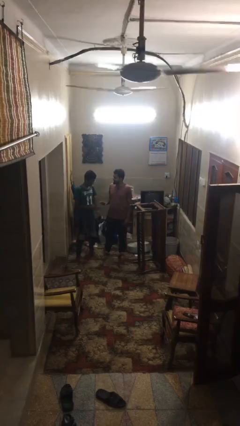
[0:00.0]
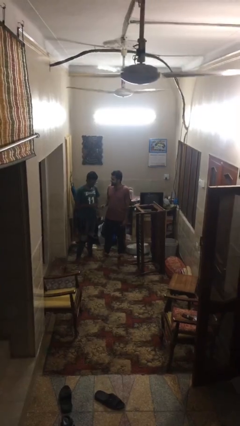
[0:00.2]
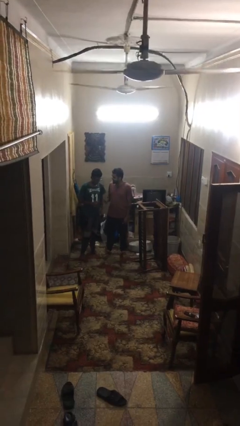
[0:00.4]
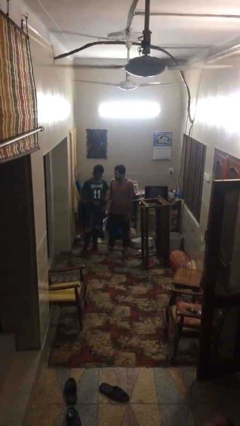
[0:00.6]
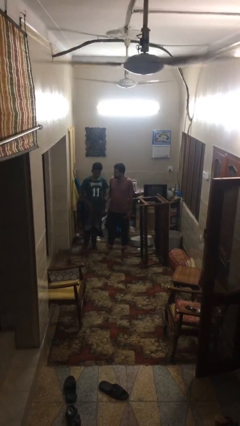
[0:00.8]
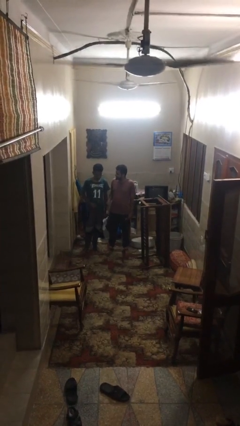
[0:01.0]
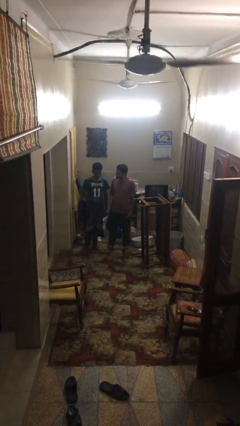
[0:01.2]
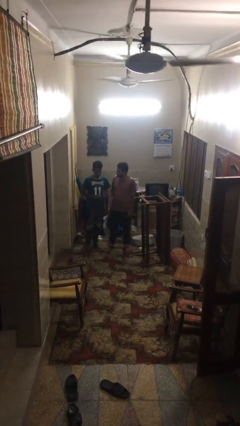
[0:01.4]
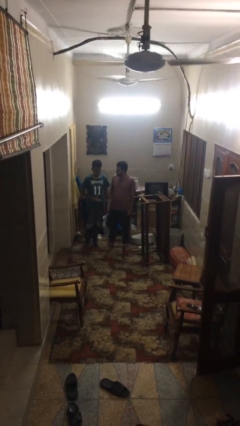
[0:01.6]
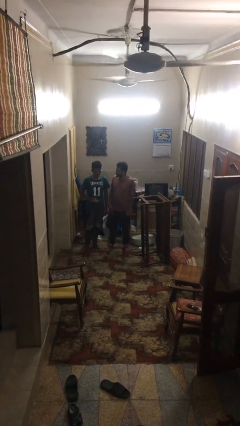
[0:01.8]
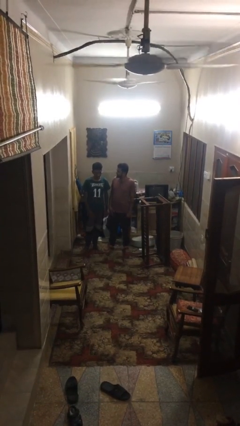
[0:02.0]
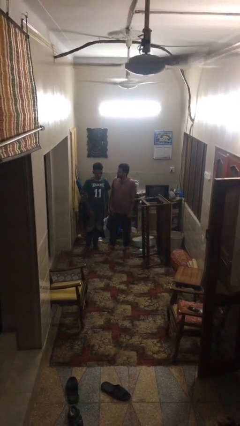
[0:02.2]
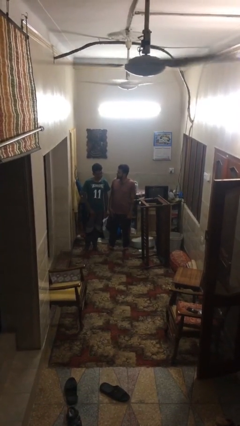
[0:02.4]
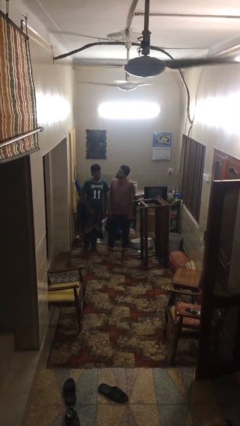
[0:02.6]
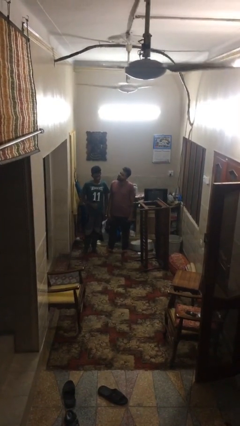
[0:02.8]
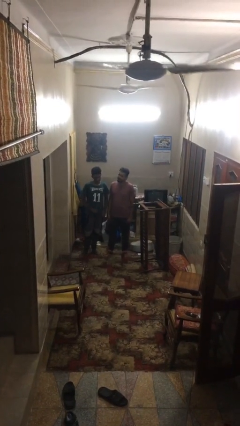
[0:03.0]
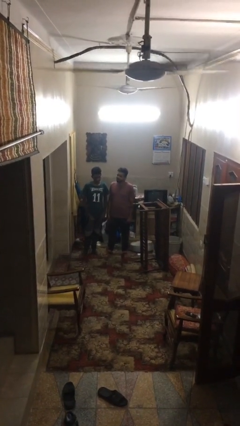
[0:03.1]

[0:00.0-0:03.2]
person talks to person

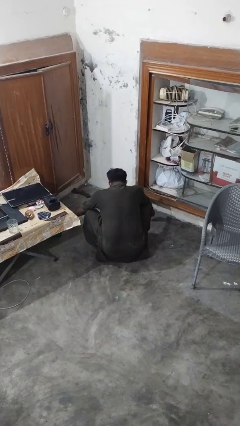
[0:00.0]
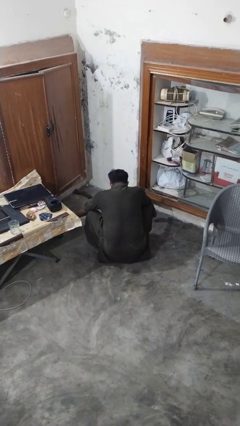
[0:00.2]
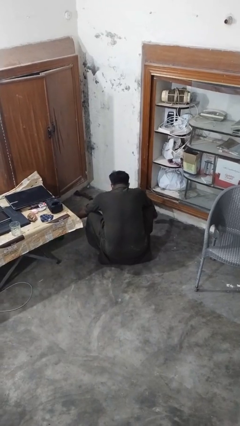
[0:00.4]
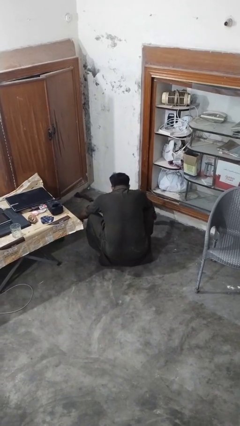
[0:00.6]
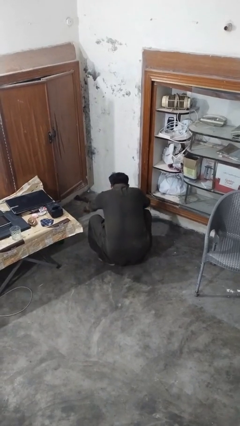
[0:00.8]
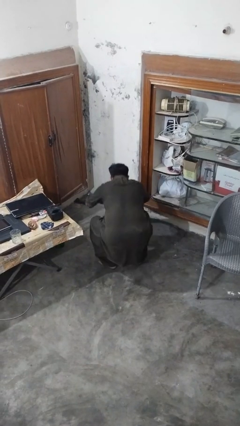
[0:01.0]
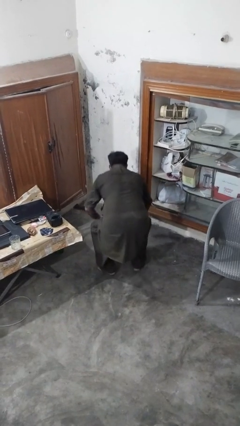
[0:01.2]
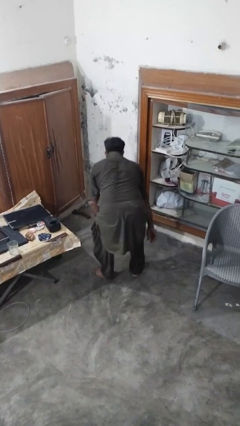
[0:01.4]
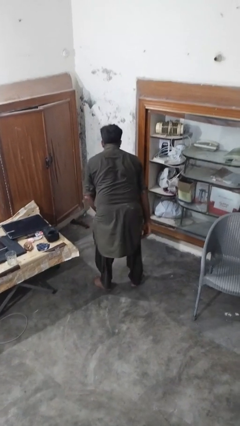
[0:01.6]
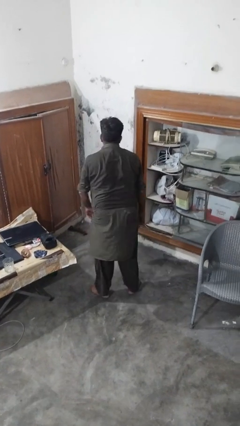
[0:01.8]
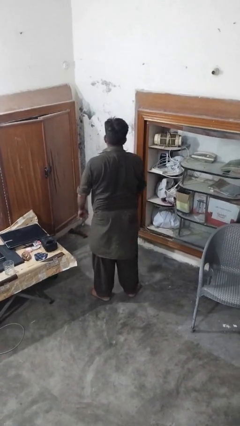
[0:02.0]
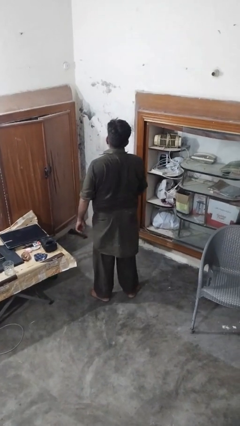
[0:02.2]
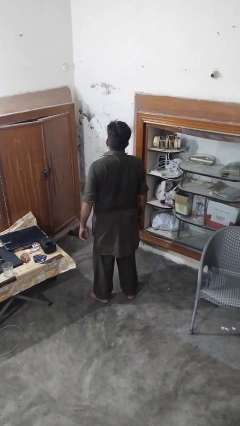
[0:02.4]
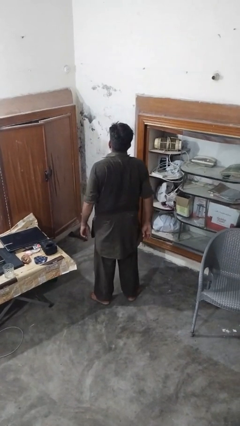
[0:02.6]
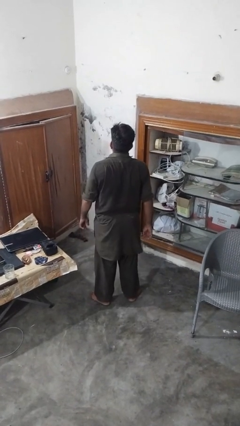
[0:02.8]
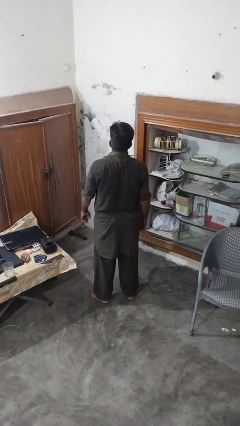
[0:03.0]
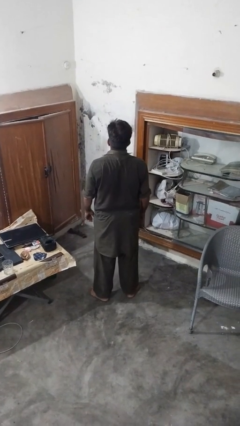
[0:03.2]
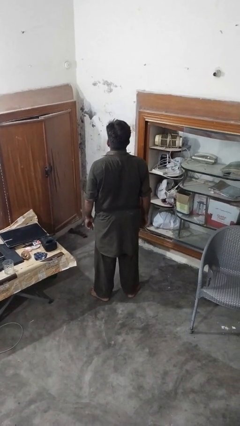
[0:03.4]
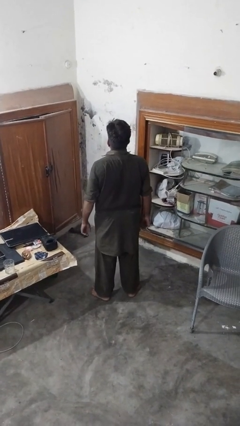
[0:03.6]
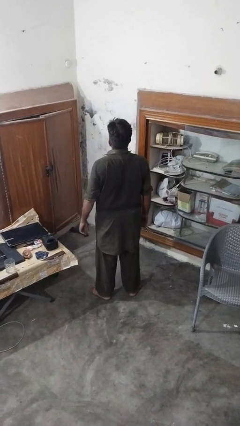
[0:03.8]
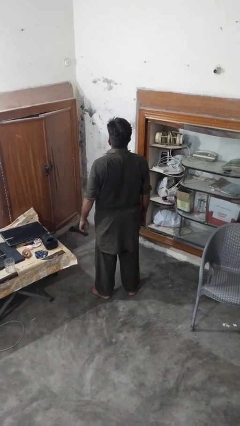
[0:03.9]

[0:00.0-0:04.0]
person stands up

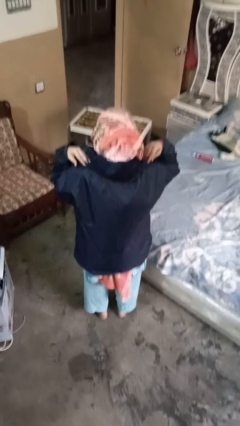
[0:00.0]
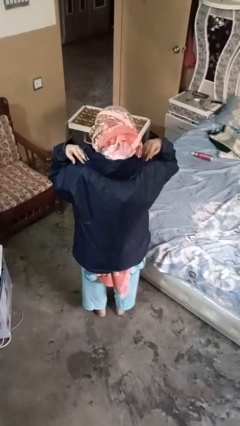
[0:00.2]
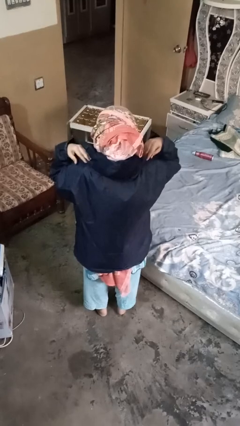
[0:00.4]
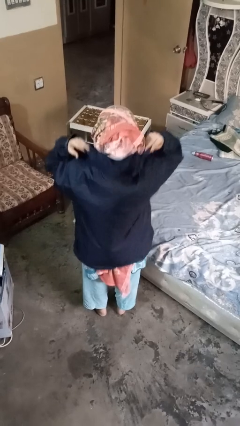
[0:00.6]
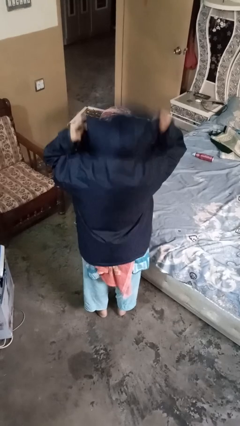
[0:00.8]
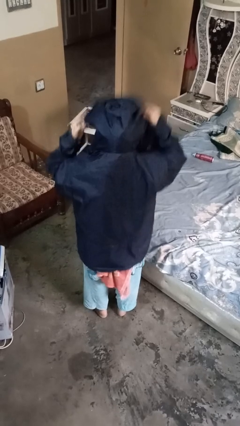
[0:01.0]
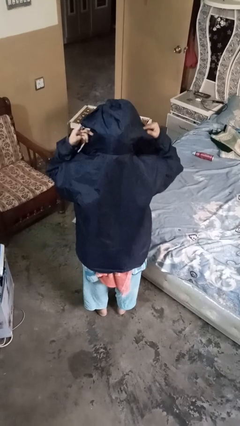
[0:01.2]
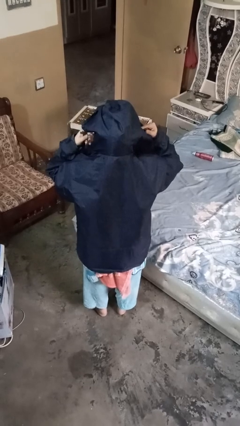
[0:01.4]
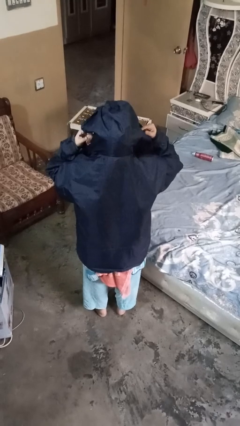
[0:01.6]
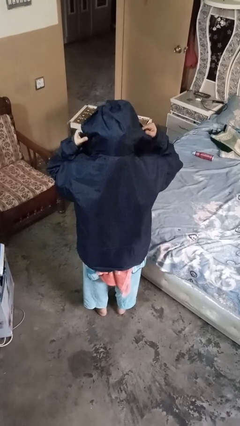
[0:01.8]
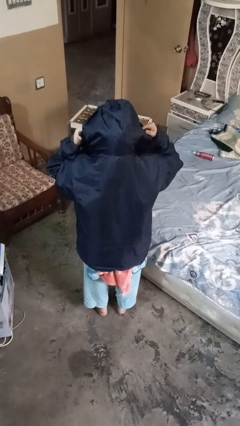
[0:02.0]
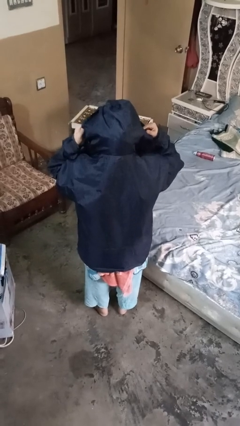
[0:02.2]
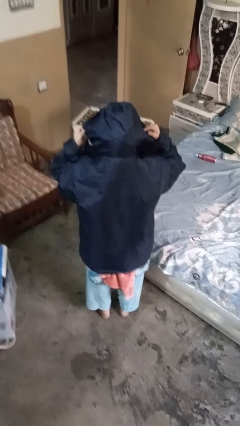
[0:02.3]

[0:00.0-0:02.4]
person puts on hoodie

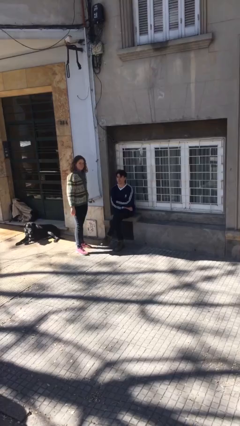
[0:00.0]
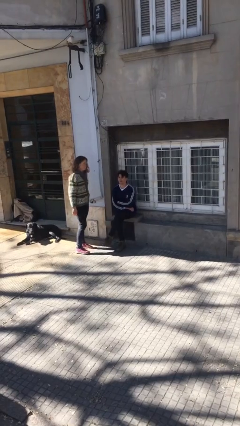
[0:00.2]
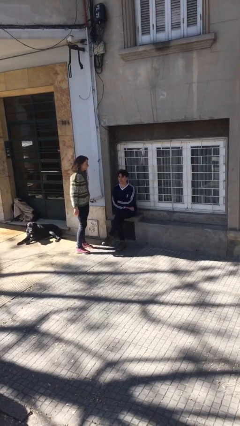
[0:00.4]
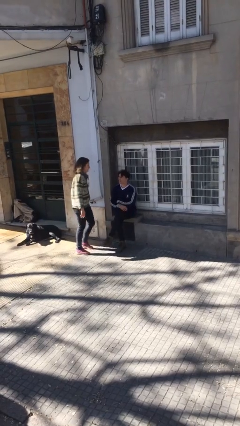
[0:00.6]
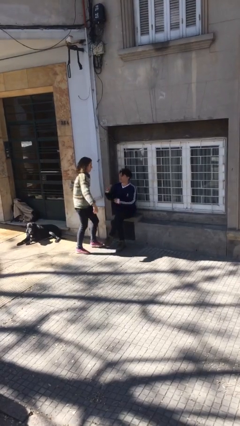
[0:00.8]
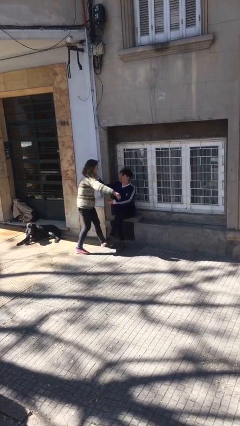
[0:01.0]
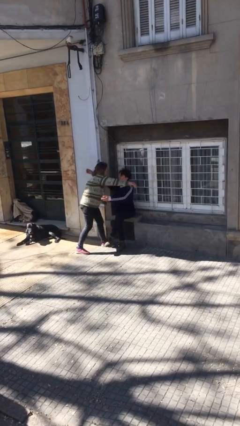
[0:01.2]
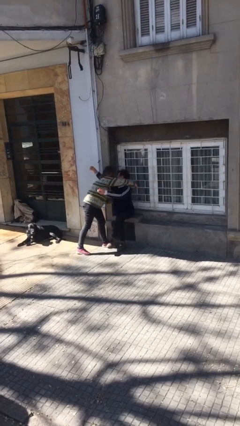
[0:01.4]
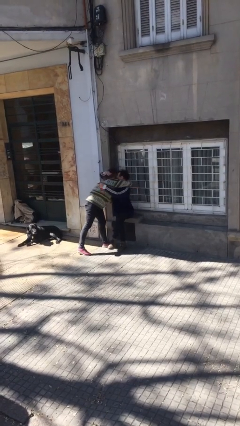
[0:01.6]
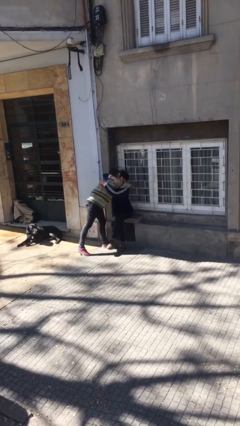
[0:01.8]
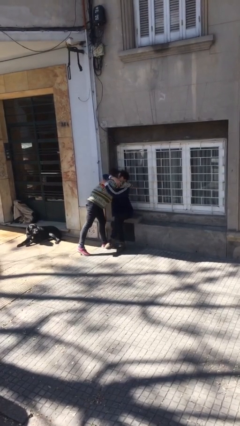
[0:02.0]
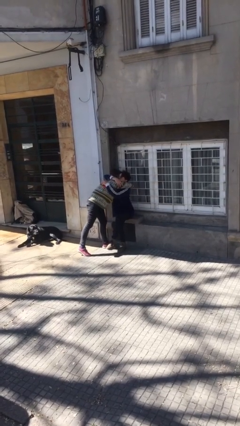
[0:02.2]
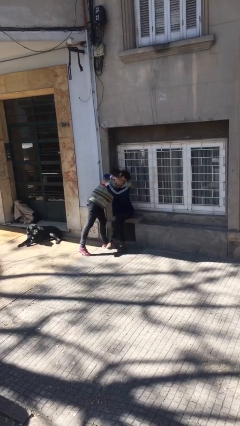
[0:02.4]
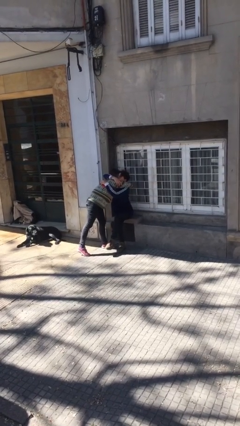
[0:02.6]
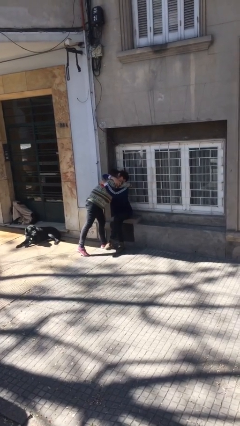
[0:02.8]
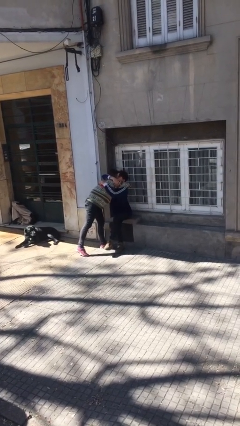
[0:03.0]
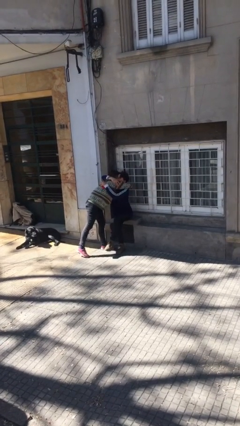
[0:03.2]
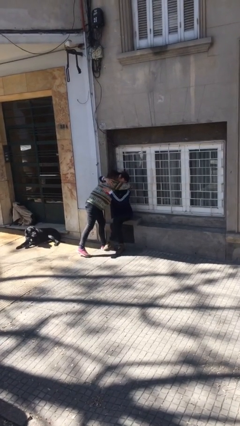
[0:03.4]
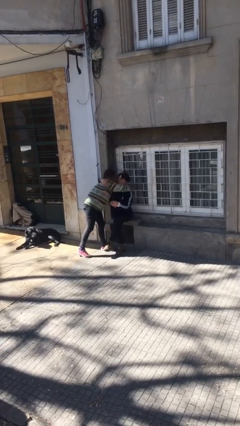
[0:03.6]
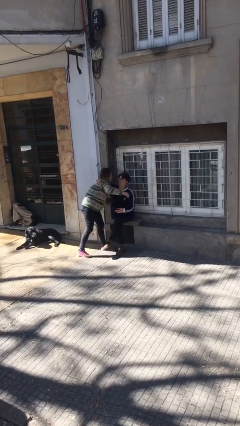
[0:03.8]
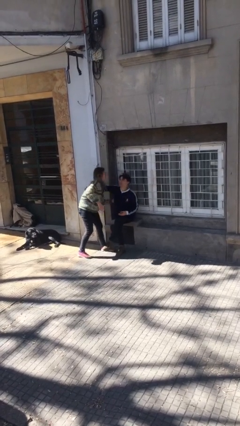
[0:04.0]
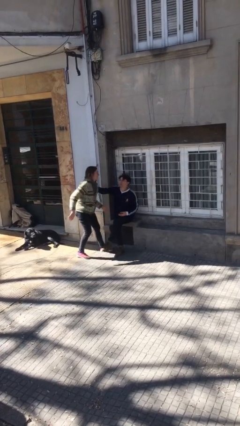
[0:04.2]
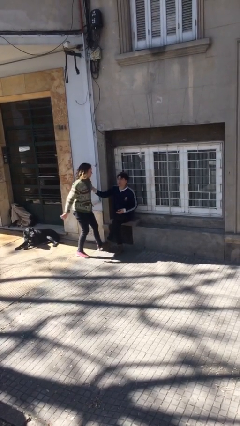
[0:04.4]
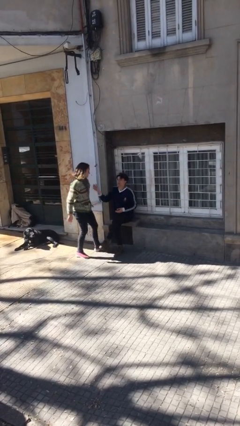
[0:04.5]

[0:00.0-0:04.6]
person embraces person

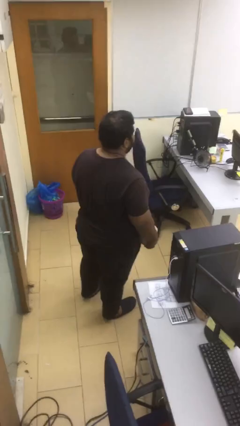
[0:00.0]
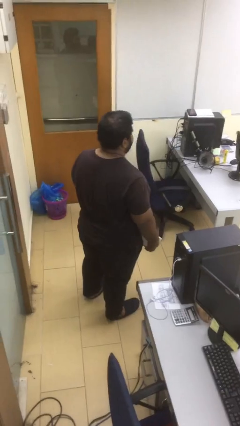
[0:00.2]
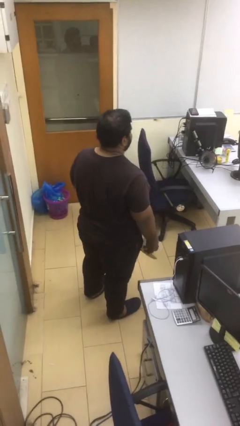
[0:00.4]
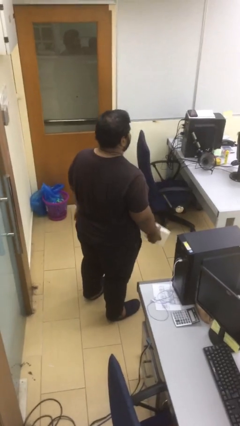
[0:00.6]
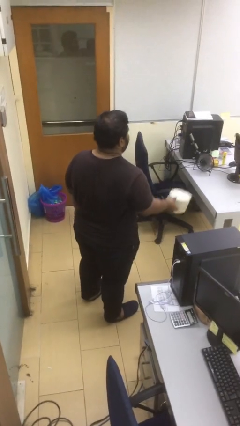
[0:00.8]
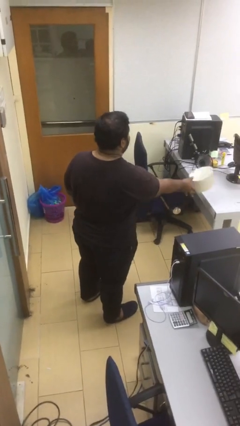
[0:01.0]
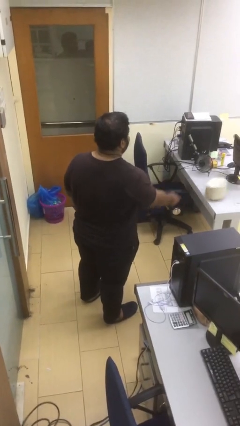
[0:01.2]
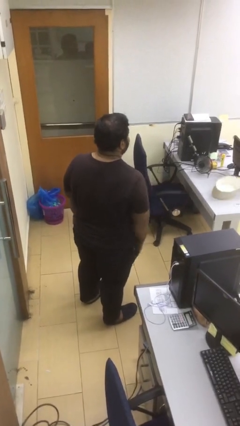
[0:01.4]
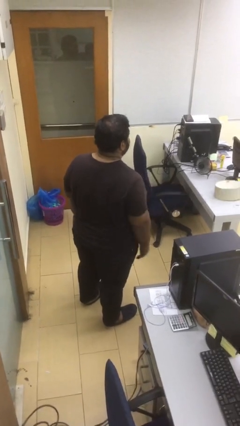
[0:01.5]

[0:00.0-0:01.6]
person throws object on table

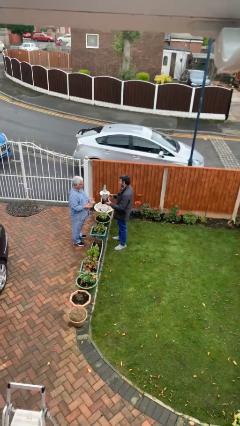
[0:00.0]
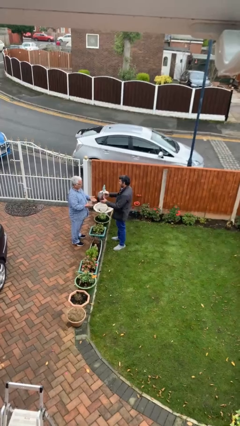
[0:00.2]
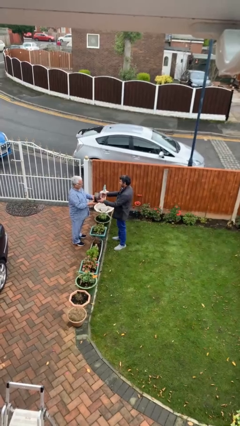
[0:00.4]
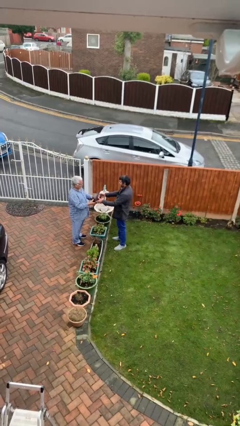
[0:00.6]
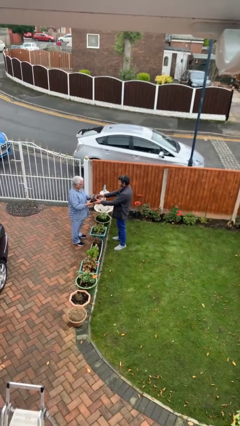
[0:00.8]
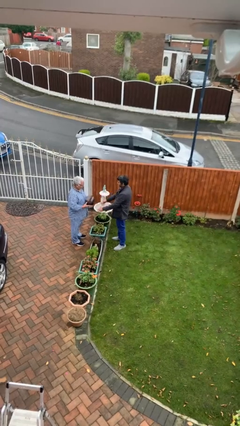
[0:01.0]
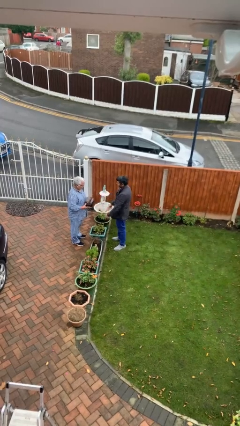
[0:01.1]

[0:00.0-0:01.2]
person transfers object to person

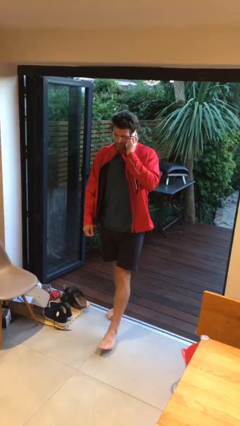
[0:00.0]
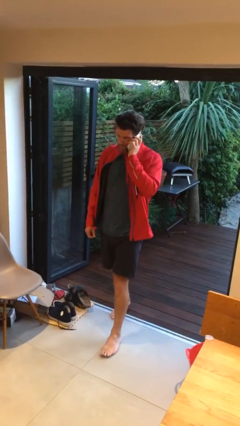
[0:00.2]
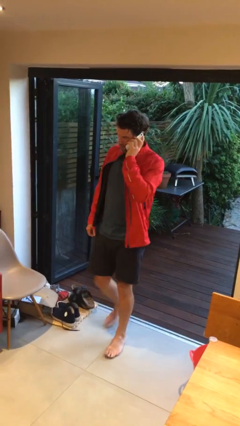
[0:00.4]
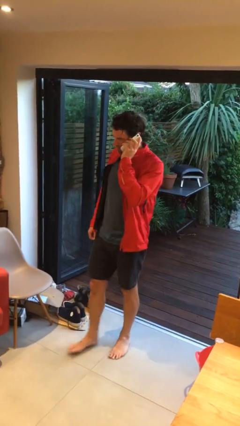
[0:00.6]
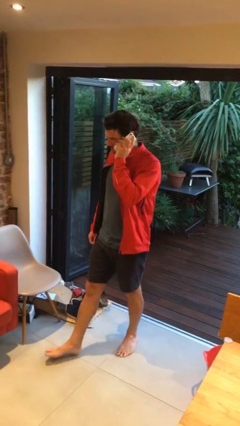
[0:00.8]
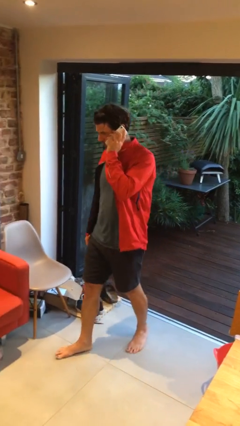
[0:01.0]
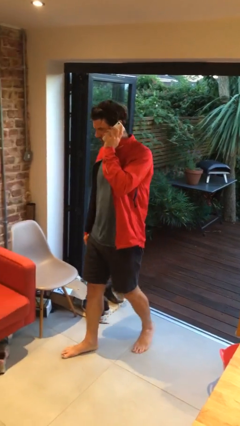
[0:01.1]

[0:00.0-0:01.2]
person enters scene through structure
